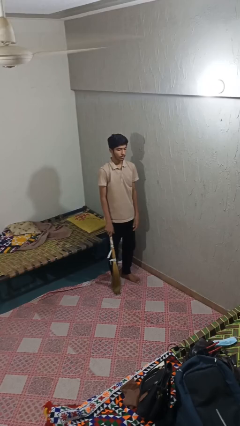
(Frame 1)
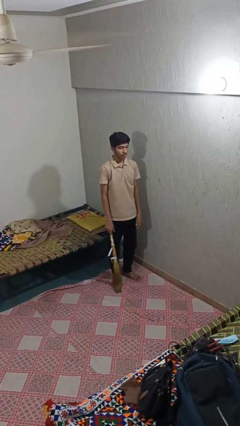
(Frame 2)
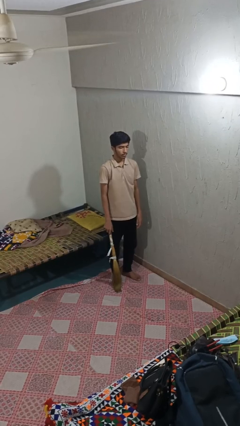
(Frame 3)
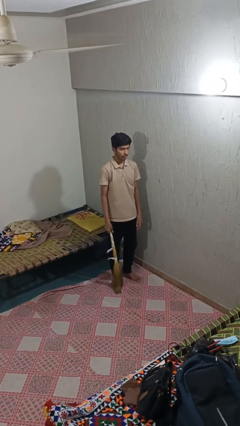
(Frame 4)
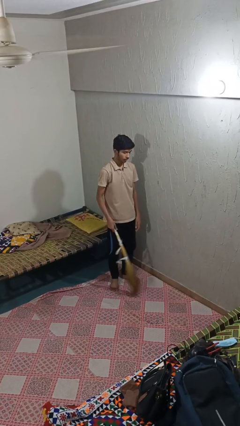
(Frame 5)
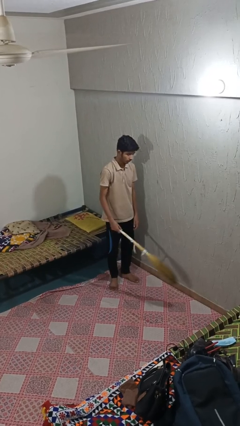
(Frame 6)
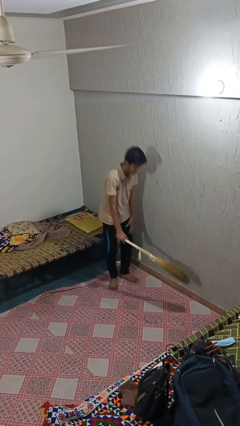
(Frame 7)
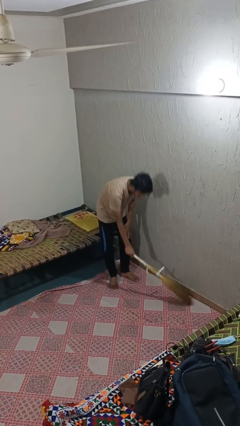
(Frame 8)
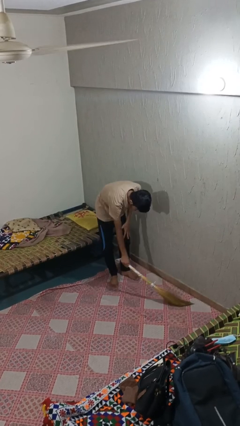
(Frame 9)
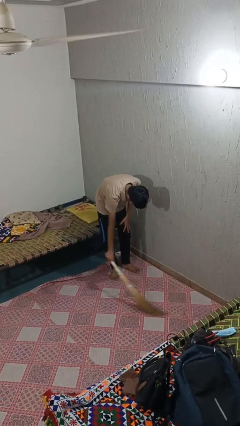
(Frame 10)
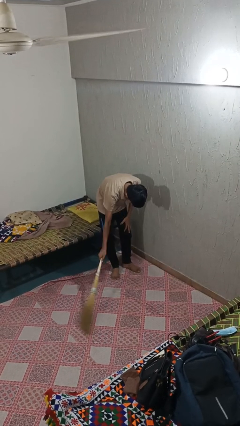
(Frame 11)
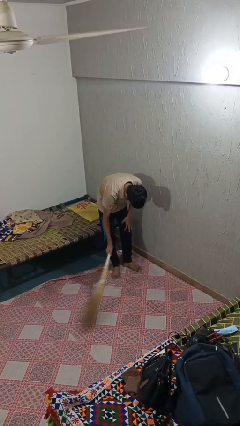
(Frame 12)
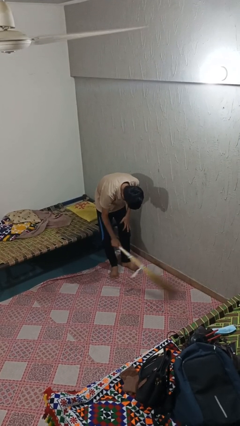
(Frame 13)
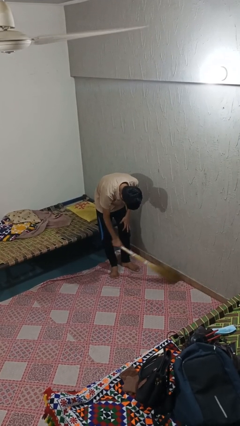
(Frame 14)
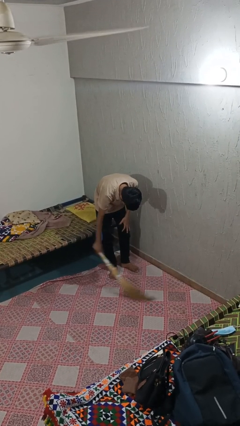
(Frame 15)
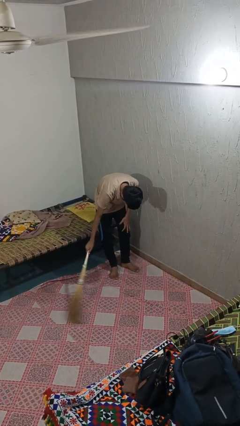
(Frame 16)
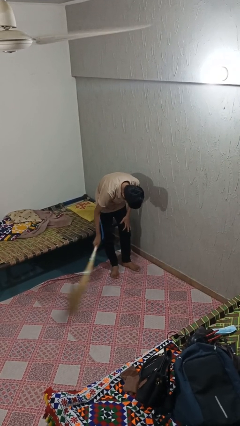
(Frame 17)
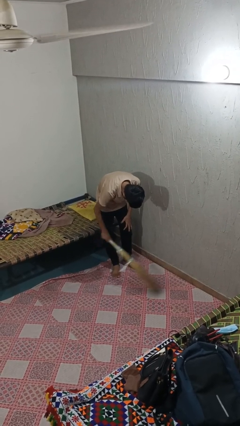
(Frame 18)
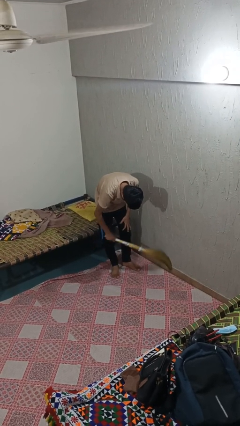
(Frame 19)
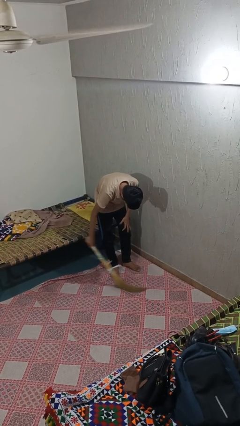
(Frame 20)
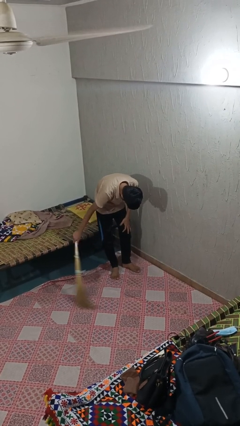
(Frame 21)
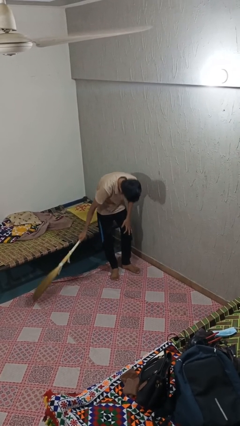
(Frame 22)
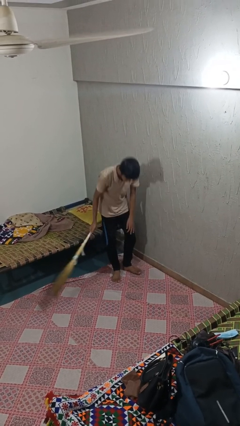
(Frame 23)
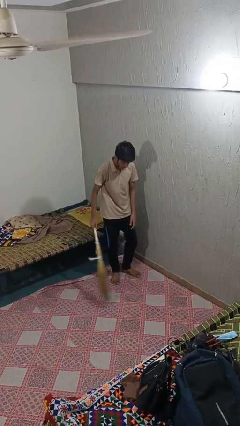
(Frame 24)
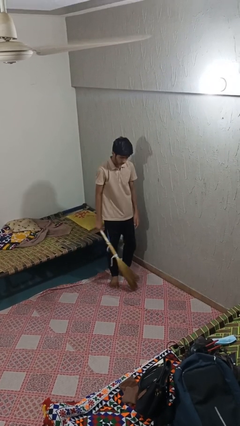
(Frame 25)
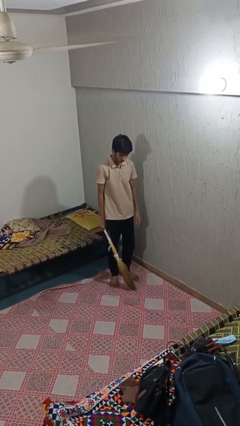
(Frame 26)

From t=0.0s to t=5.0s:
person sweeps floor

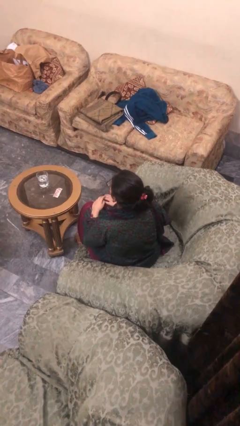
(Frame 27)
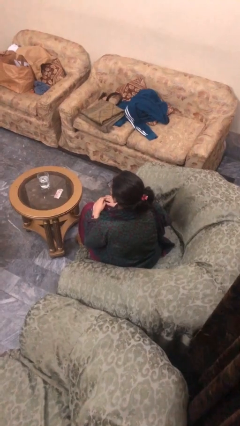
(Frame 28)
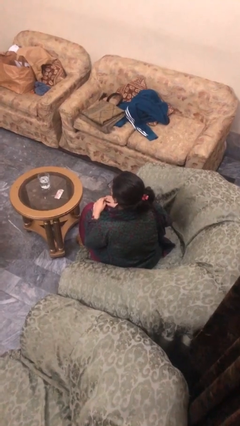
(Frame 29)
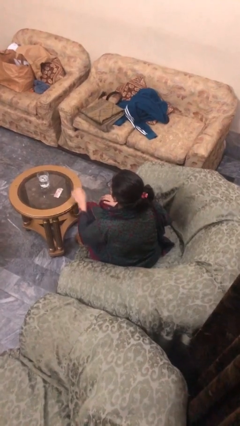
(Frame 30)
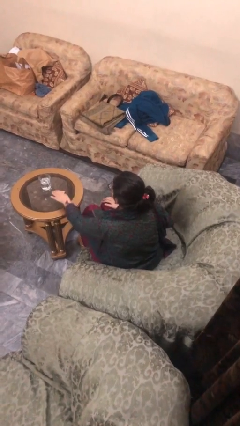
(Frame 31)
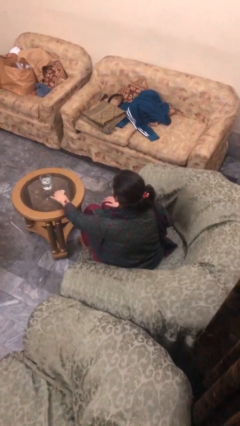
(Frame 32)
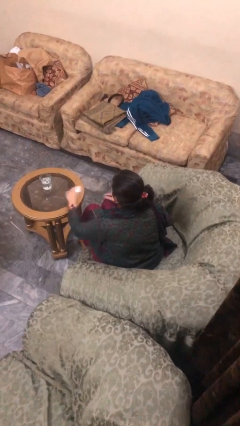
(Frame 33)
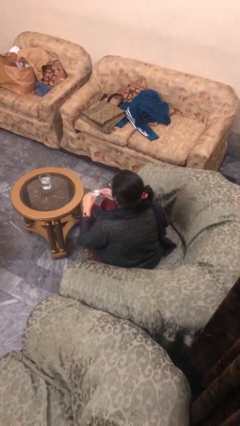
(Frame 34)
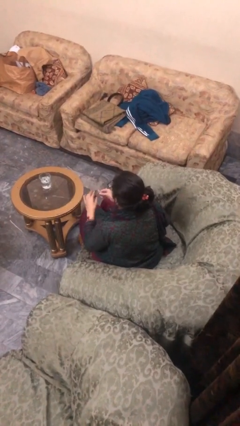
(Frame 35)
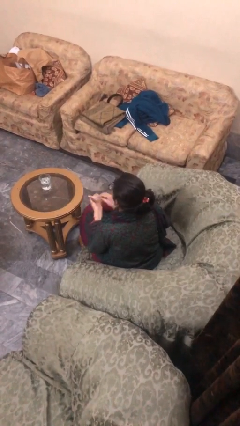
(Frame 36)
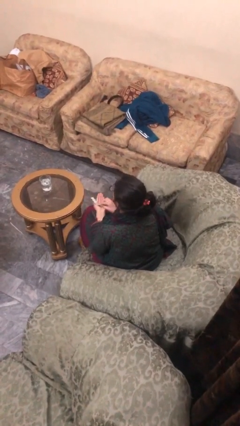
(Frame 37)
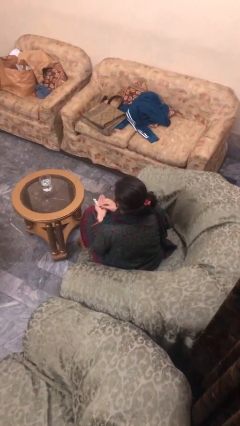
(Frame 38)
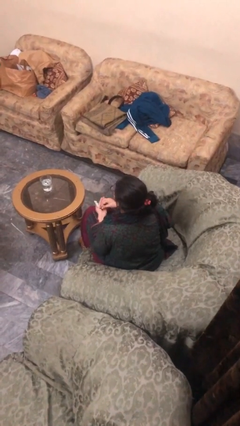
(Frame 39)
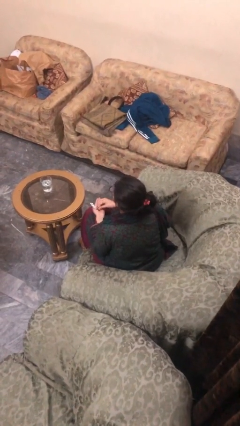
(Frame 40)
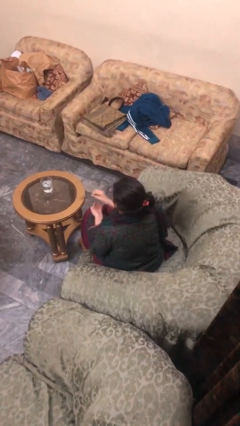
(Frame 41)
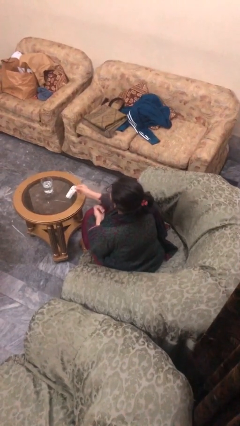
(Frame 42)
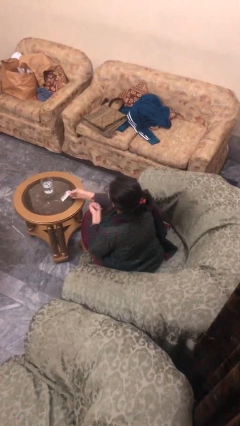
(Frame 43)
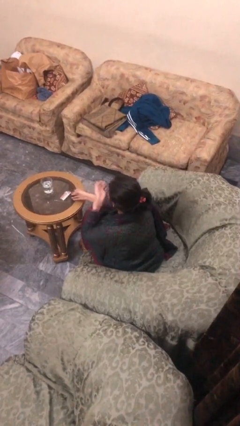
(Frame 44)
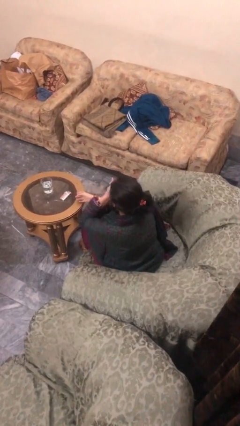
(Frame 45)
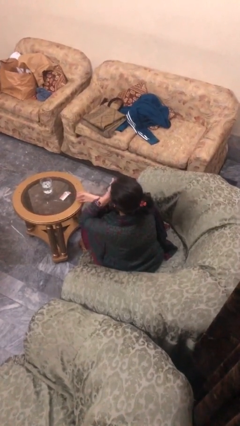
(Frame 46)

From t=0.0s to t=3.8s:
person takes medicine pills

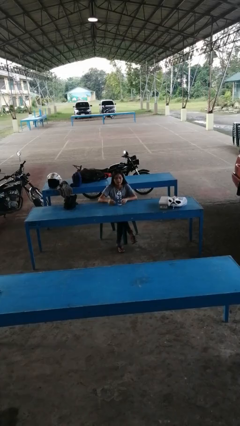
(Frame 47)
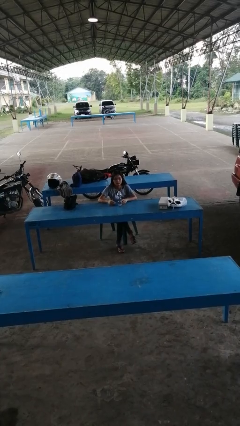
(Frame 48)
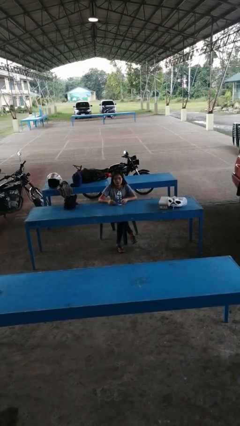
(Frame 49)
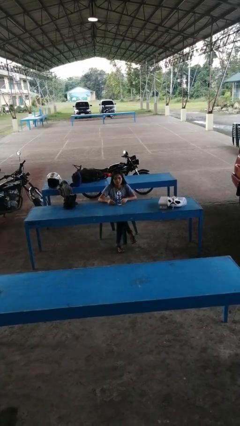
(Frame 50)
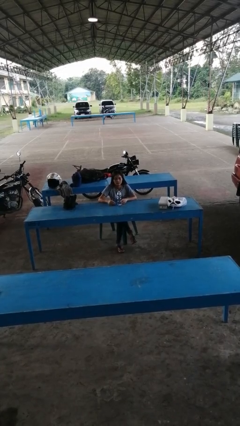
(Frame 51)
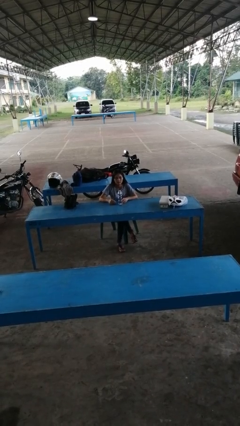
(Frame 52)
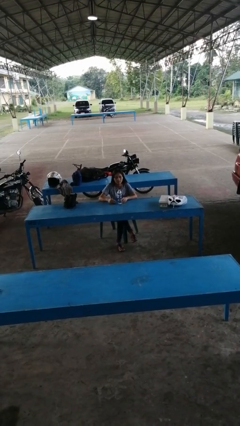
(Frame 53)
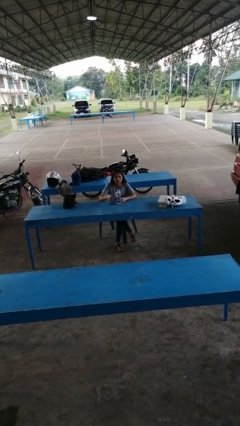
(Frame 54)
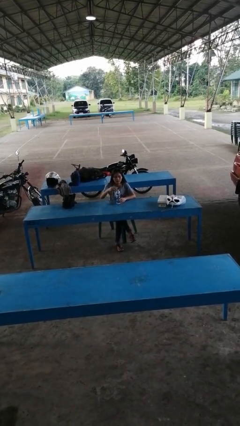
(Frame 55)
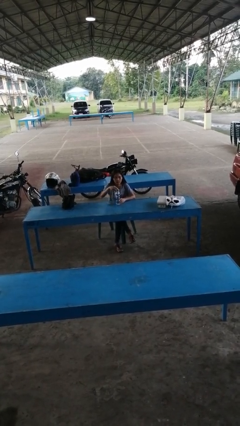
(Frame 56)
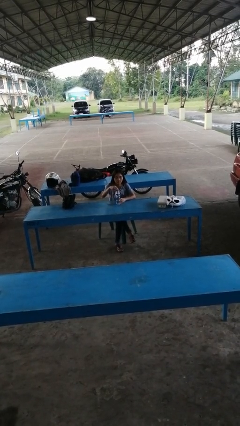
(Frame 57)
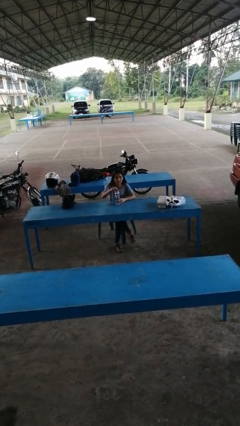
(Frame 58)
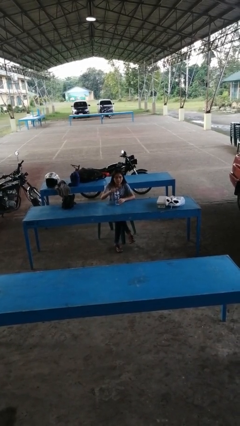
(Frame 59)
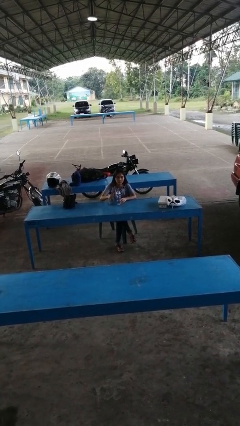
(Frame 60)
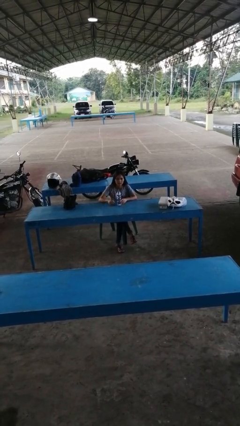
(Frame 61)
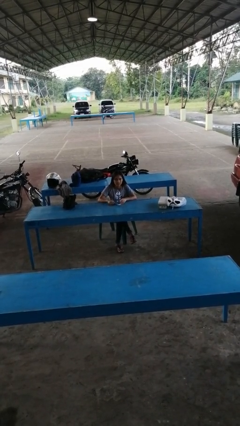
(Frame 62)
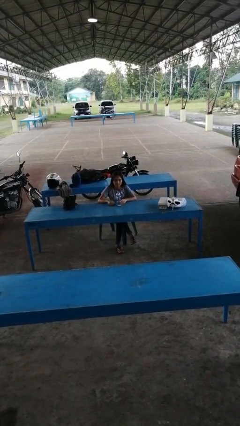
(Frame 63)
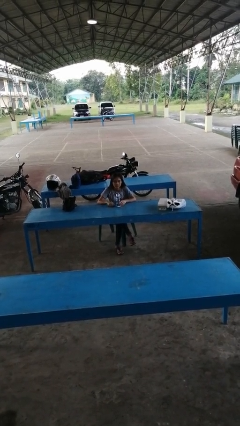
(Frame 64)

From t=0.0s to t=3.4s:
person screws lid to bottle

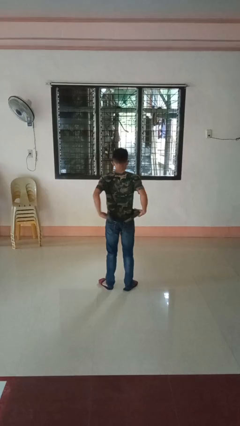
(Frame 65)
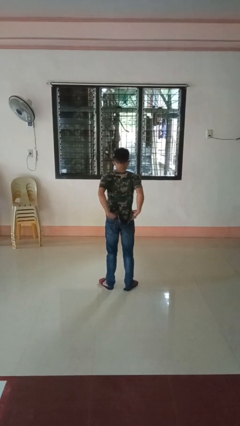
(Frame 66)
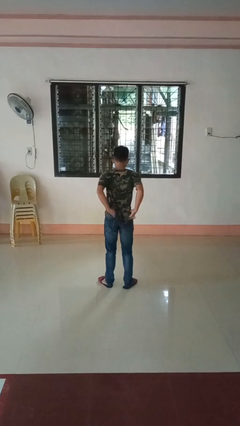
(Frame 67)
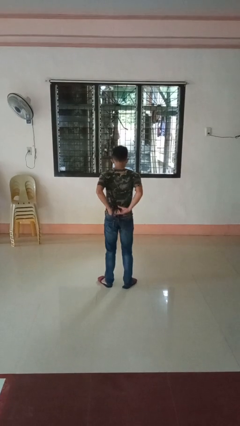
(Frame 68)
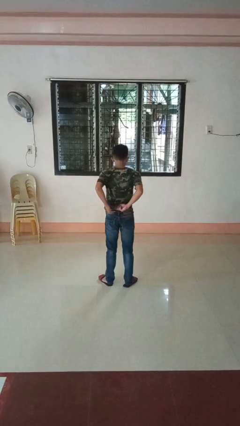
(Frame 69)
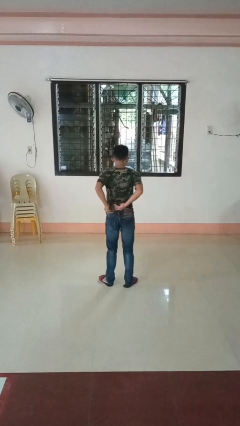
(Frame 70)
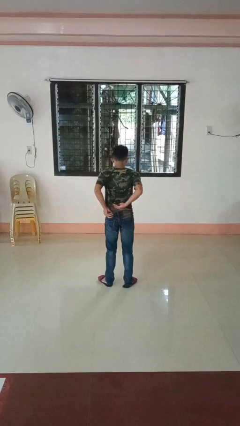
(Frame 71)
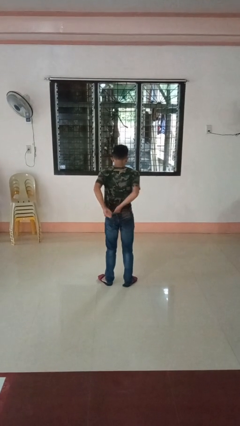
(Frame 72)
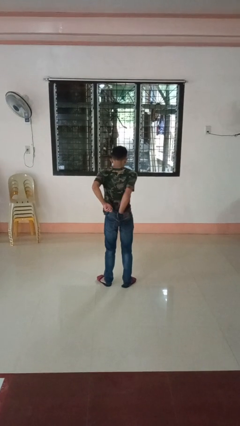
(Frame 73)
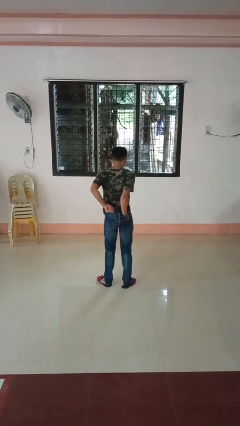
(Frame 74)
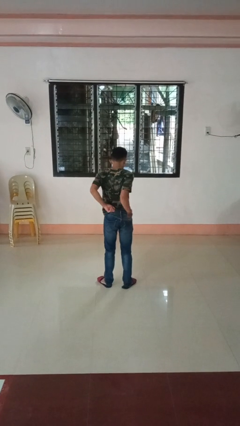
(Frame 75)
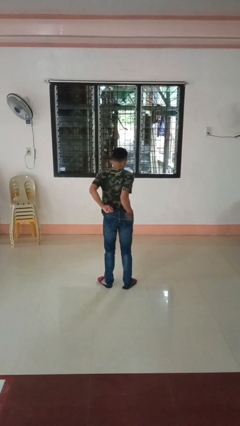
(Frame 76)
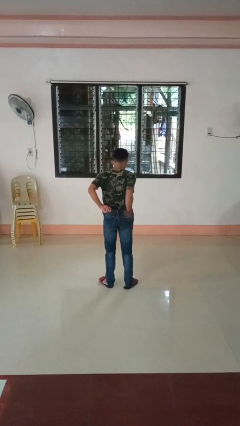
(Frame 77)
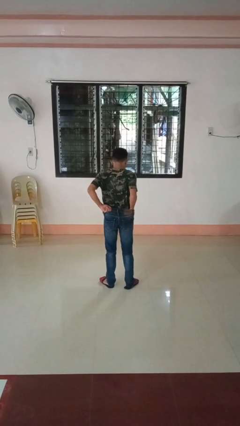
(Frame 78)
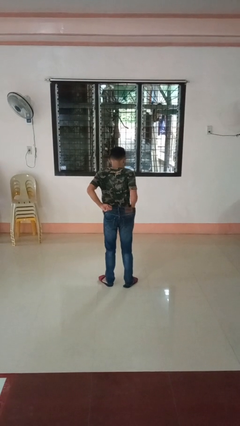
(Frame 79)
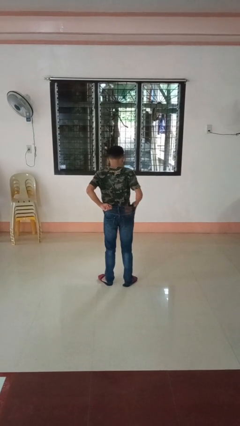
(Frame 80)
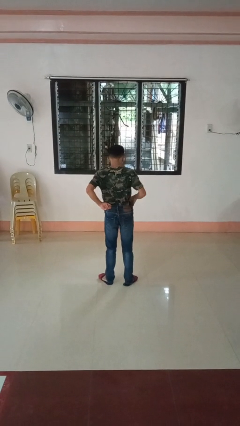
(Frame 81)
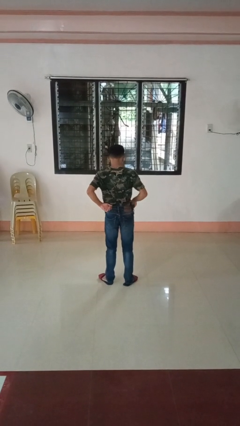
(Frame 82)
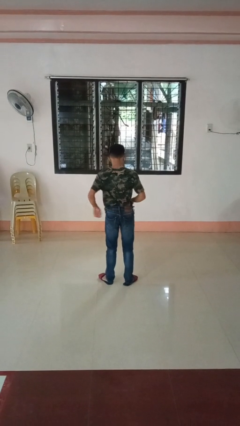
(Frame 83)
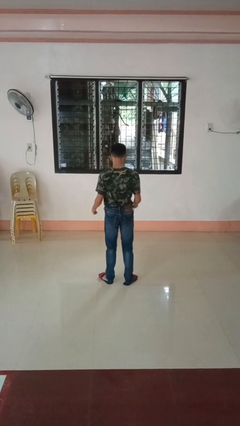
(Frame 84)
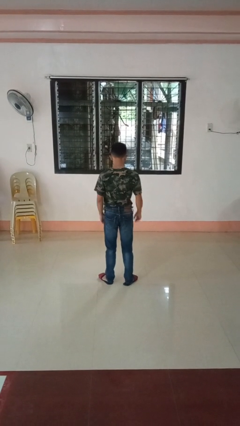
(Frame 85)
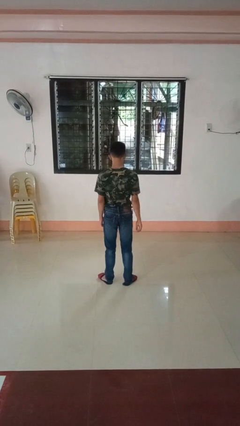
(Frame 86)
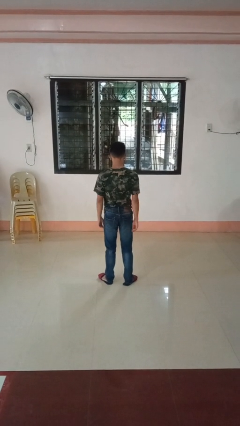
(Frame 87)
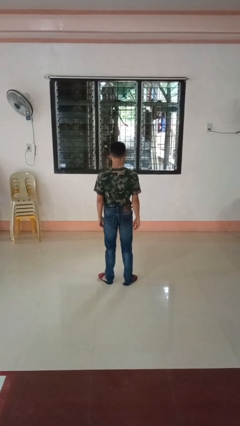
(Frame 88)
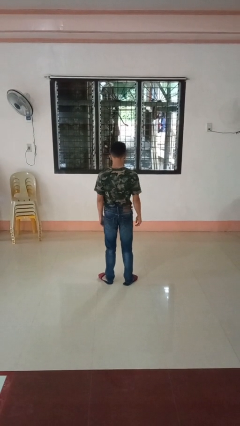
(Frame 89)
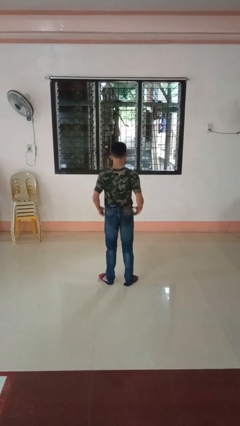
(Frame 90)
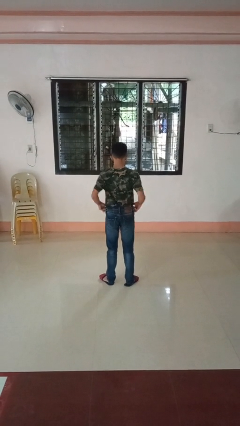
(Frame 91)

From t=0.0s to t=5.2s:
person tucks in shirt
